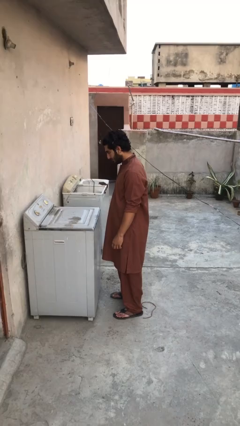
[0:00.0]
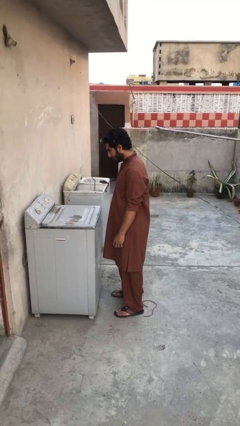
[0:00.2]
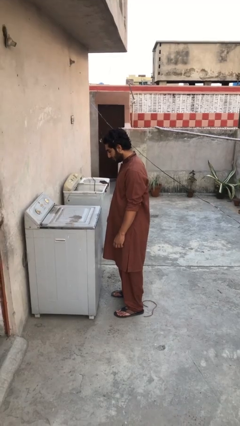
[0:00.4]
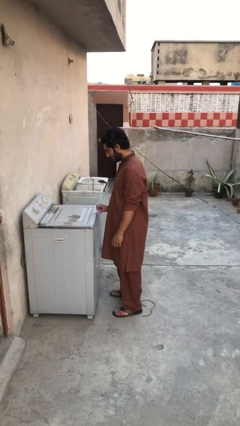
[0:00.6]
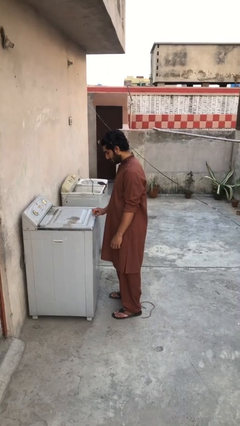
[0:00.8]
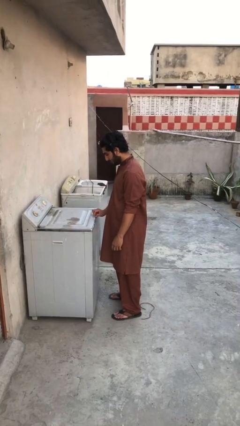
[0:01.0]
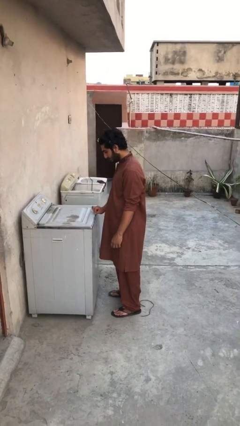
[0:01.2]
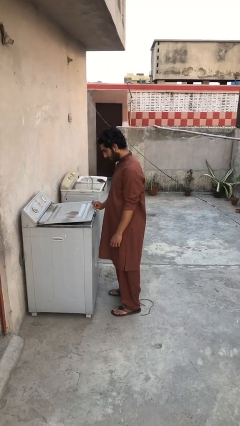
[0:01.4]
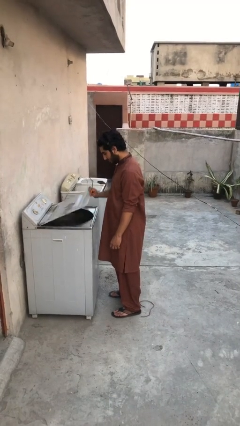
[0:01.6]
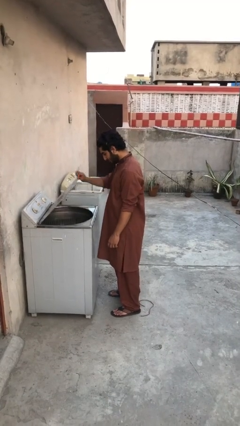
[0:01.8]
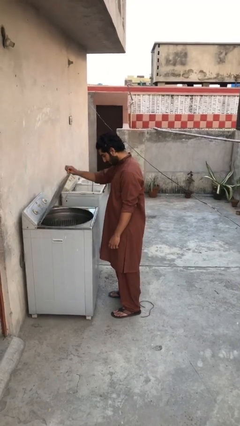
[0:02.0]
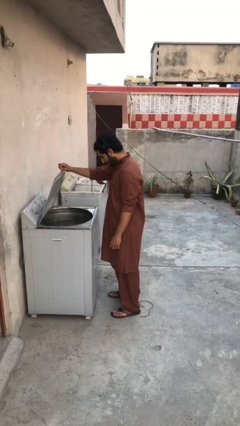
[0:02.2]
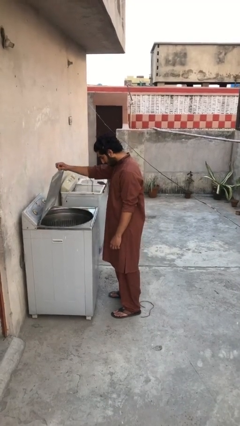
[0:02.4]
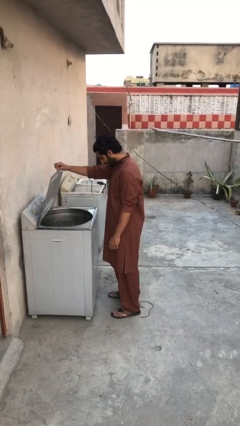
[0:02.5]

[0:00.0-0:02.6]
person opens clothes washer

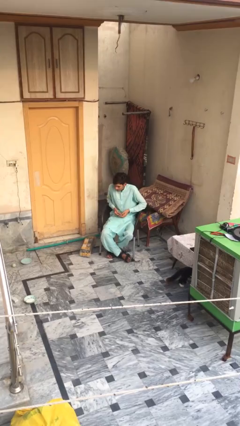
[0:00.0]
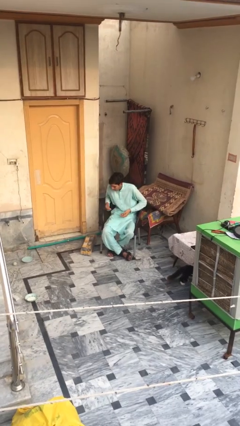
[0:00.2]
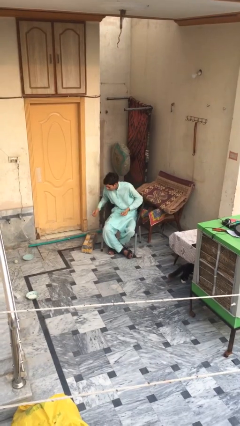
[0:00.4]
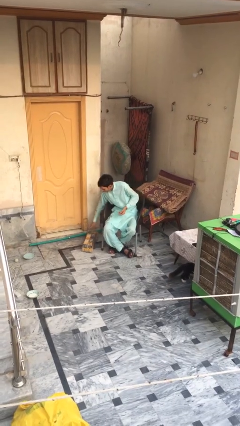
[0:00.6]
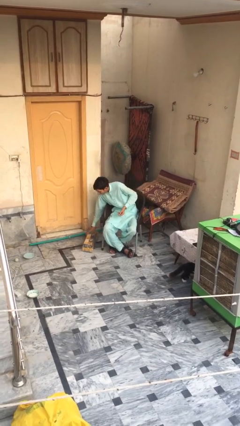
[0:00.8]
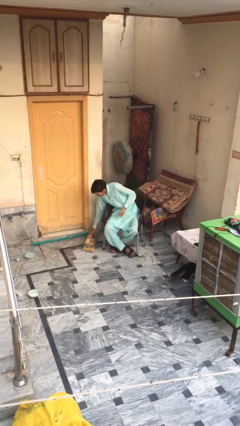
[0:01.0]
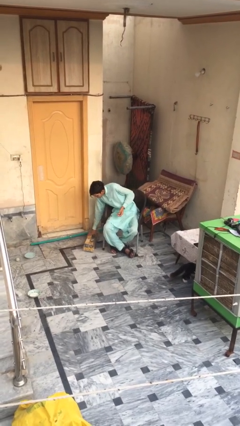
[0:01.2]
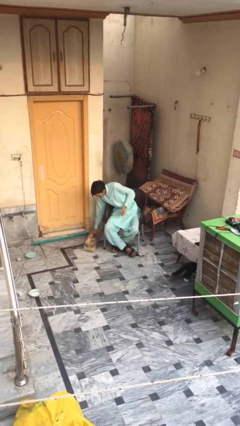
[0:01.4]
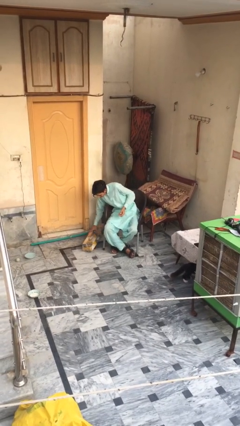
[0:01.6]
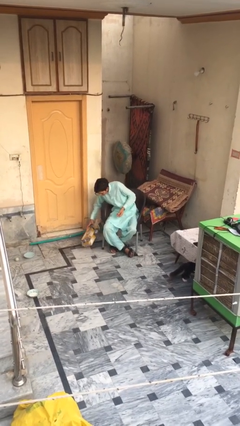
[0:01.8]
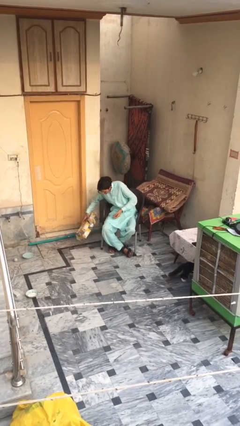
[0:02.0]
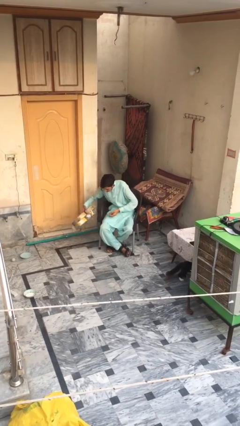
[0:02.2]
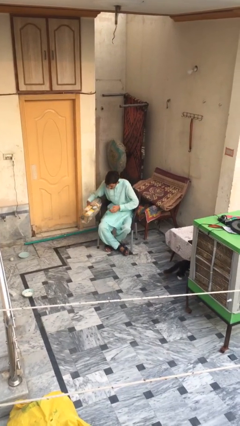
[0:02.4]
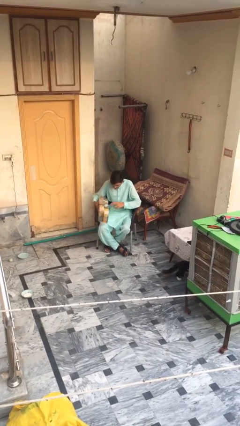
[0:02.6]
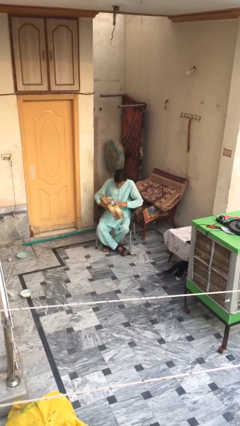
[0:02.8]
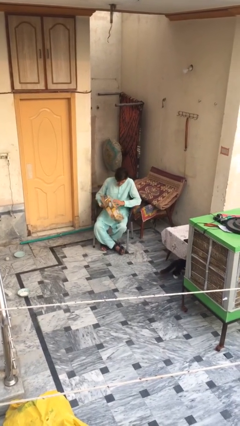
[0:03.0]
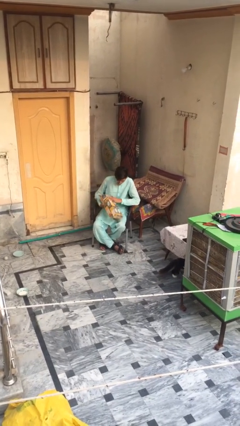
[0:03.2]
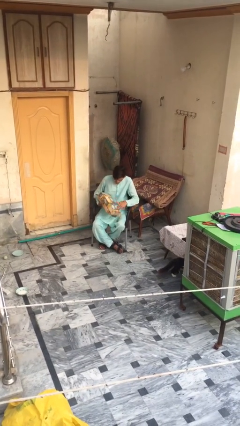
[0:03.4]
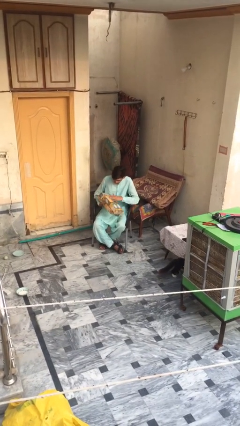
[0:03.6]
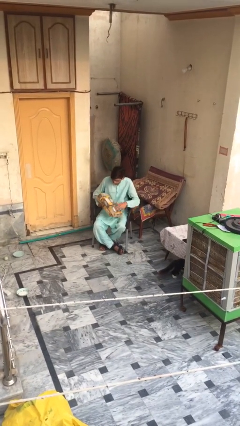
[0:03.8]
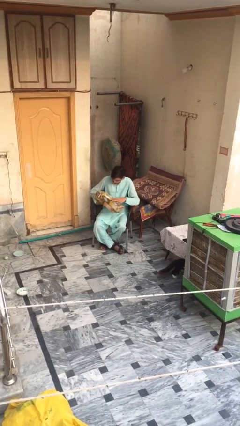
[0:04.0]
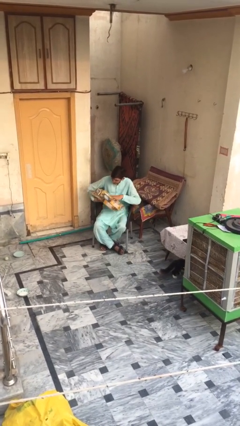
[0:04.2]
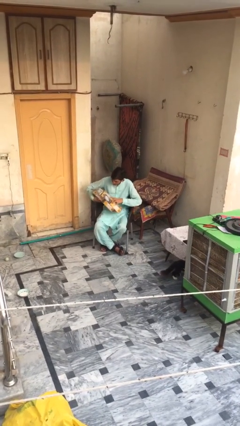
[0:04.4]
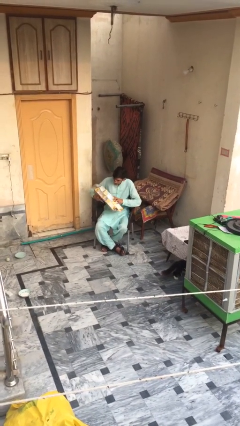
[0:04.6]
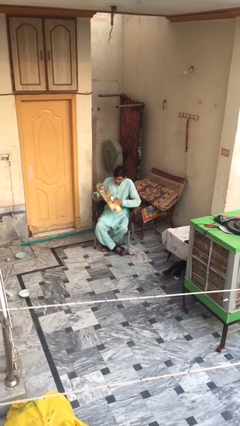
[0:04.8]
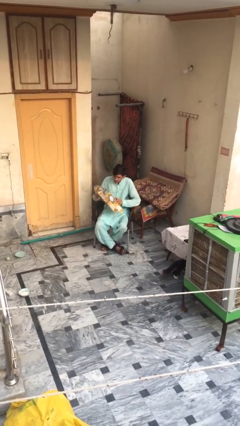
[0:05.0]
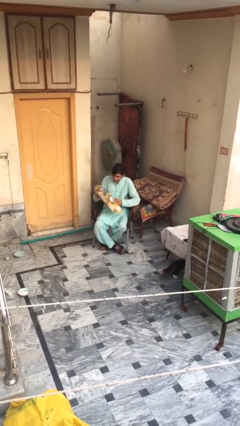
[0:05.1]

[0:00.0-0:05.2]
person picks up object from floor

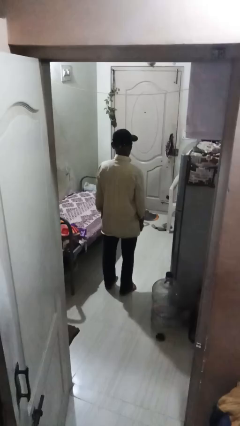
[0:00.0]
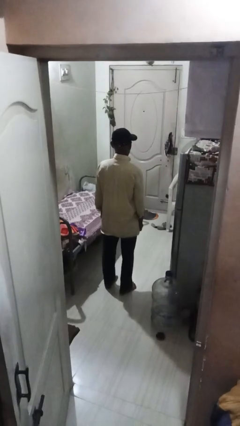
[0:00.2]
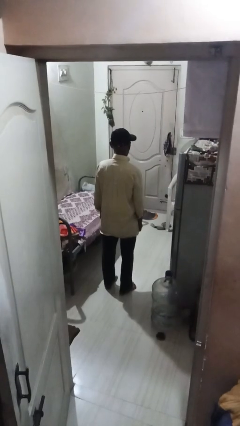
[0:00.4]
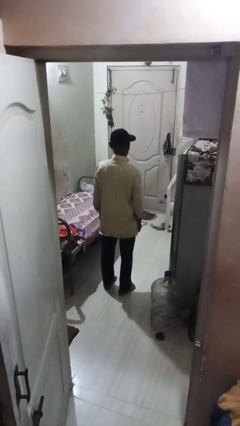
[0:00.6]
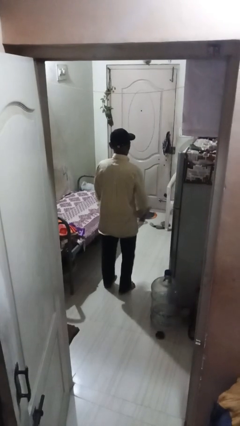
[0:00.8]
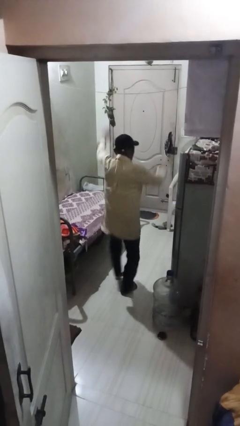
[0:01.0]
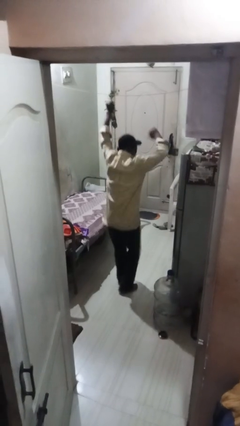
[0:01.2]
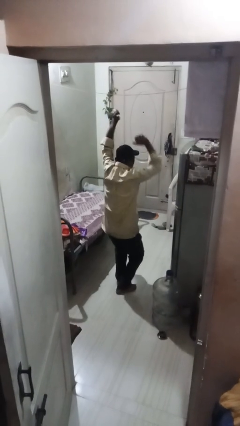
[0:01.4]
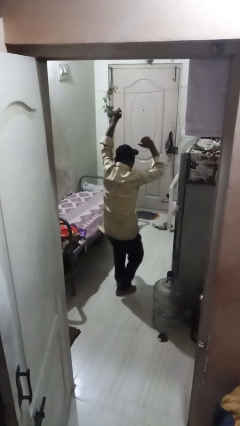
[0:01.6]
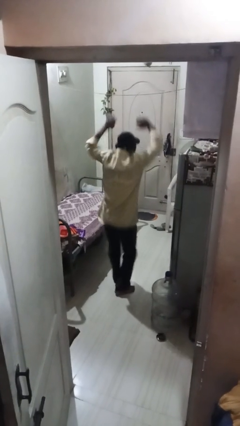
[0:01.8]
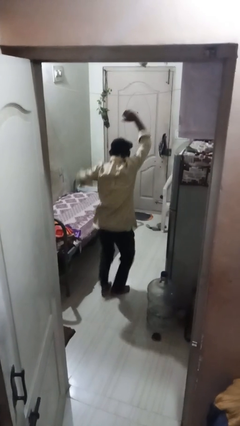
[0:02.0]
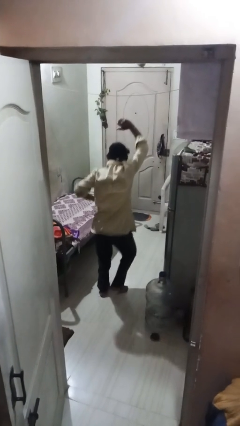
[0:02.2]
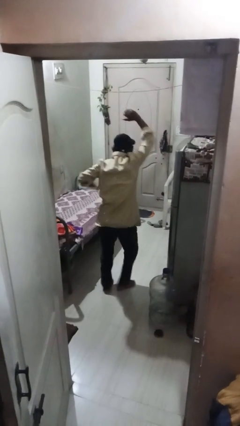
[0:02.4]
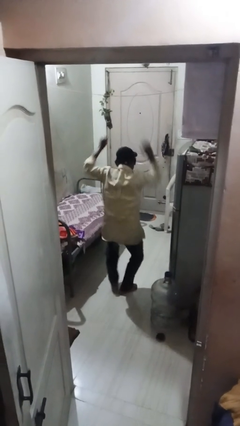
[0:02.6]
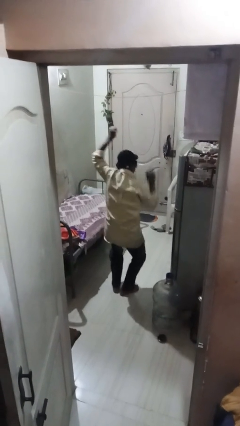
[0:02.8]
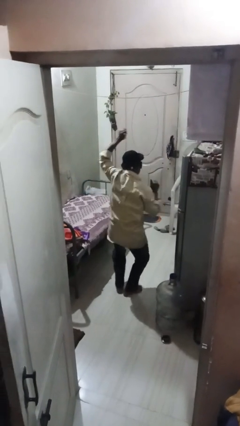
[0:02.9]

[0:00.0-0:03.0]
person dances in place

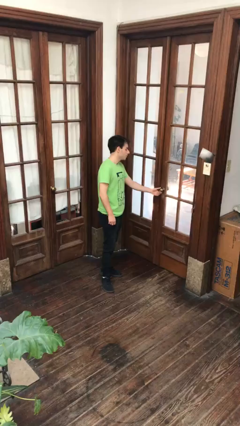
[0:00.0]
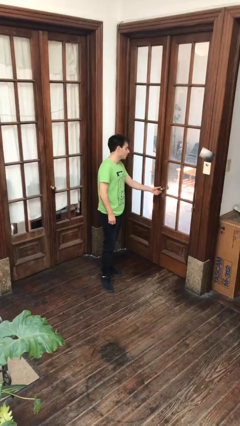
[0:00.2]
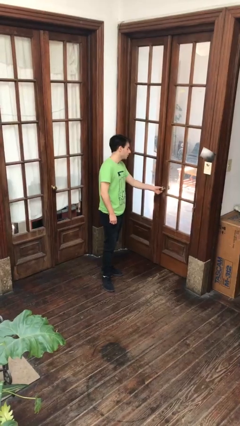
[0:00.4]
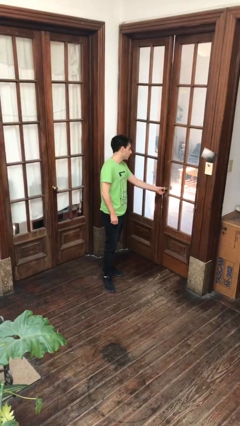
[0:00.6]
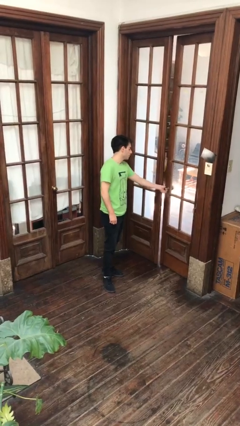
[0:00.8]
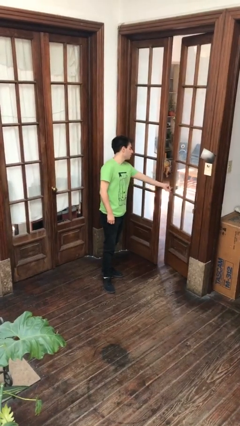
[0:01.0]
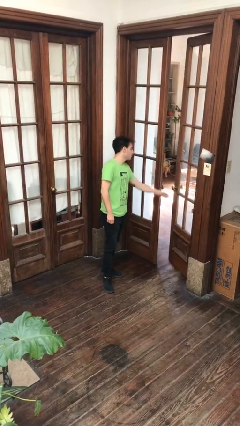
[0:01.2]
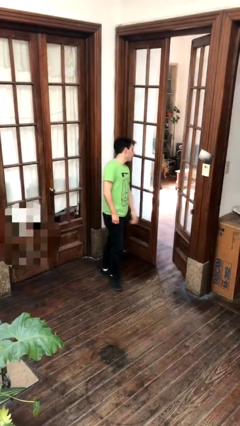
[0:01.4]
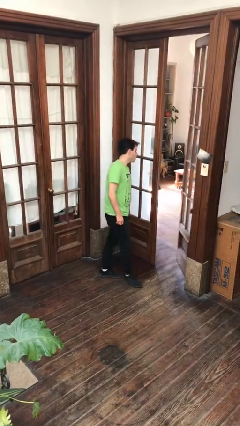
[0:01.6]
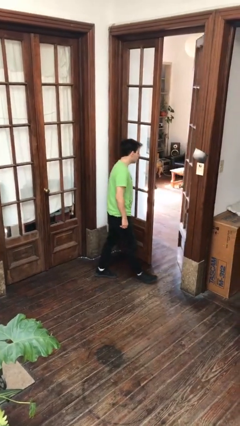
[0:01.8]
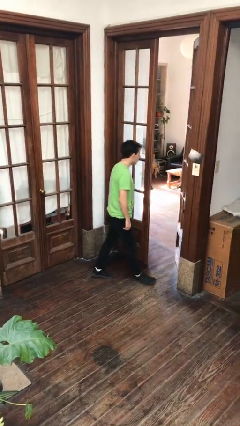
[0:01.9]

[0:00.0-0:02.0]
person opens facility door

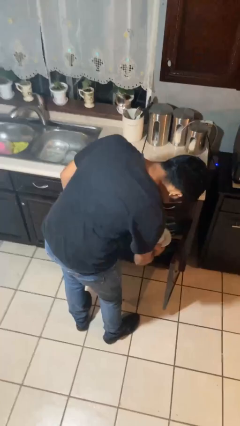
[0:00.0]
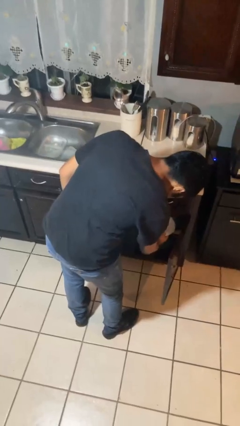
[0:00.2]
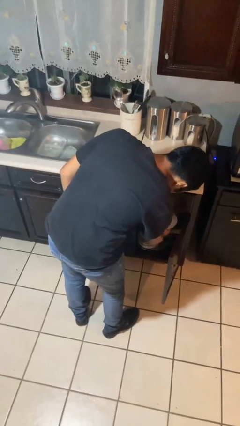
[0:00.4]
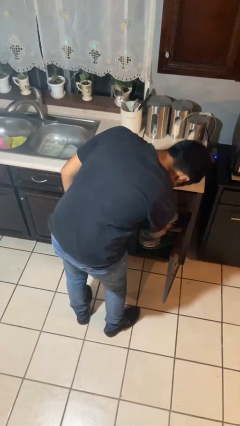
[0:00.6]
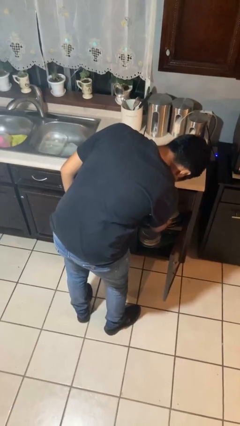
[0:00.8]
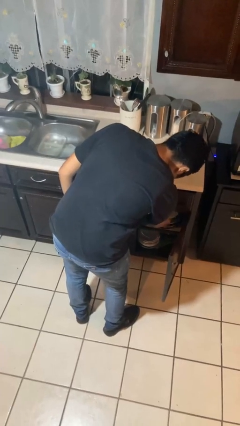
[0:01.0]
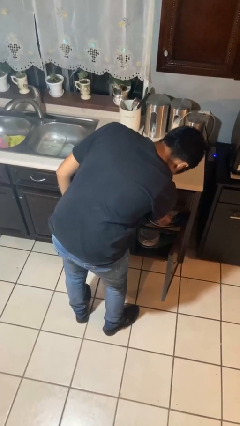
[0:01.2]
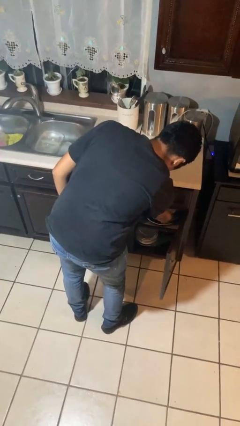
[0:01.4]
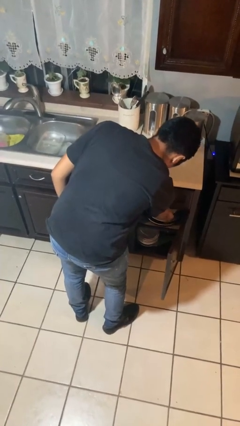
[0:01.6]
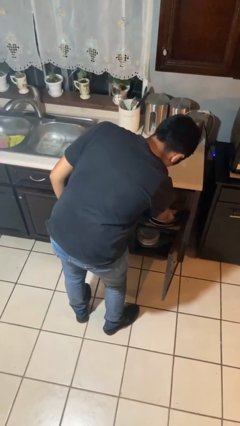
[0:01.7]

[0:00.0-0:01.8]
person takes object from cabinet

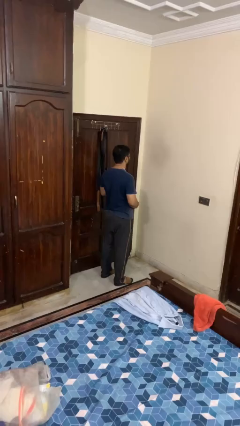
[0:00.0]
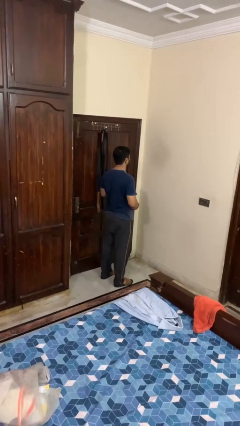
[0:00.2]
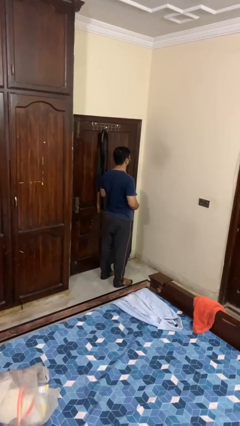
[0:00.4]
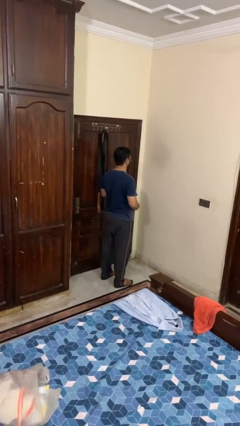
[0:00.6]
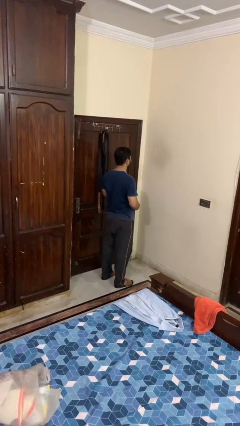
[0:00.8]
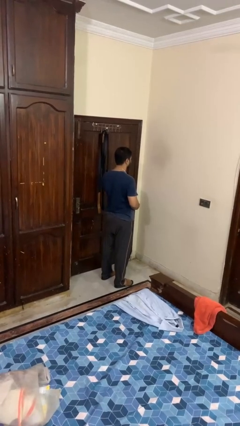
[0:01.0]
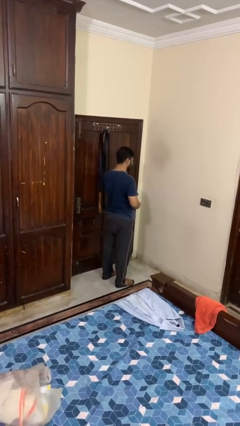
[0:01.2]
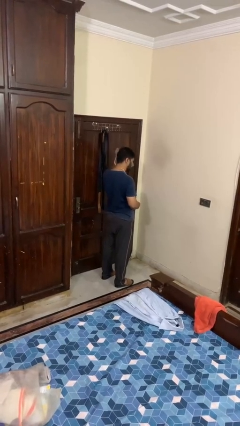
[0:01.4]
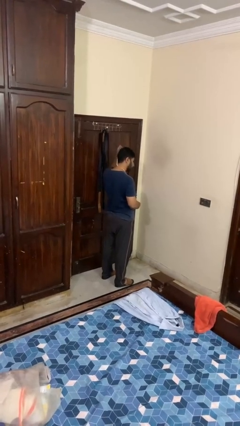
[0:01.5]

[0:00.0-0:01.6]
person takes off necklace

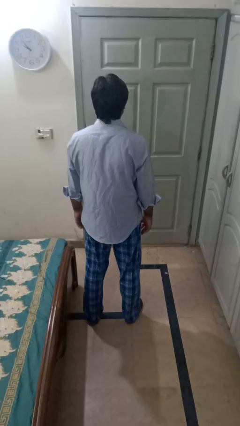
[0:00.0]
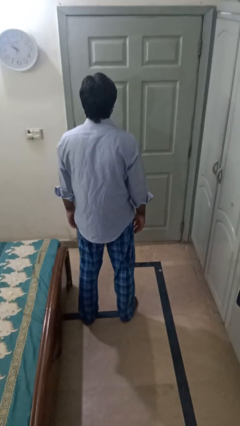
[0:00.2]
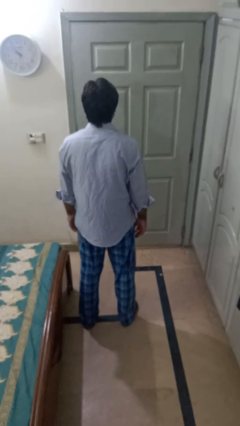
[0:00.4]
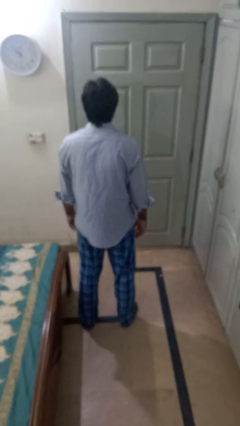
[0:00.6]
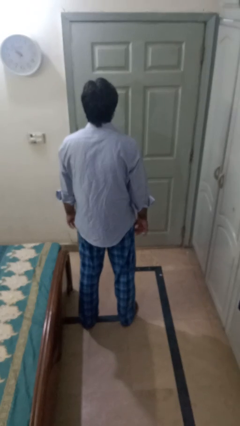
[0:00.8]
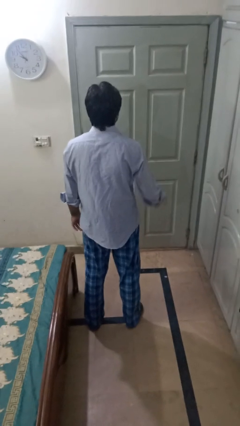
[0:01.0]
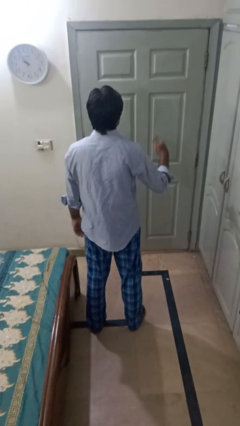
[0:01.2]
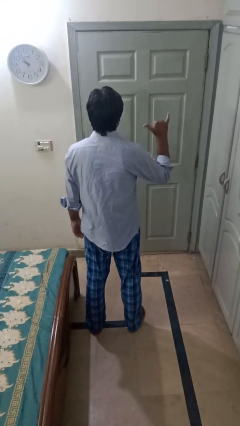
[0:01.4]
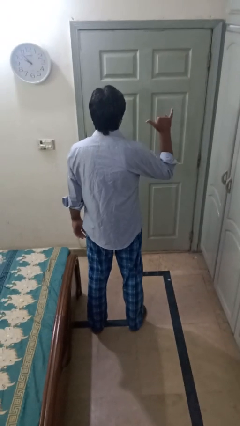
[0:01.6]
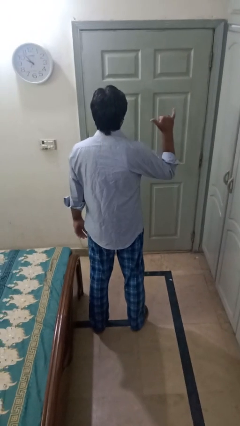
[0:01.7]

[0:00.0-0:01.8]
person gestures hang loose
